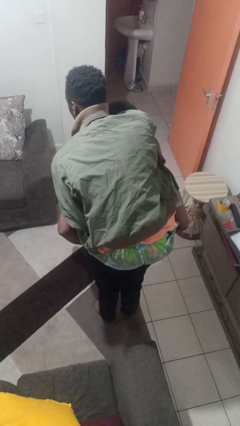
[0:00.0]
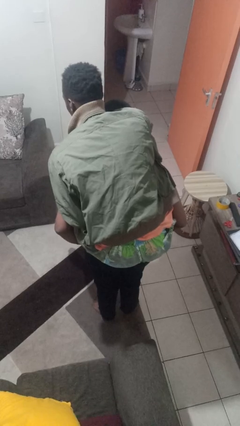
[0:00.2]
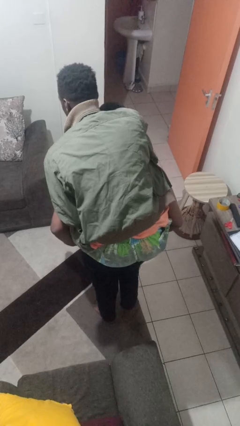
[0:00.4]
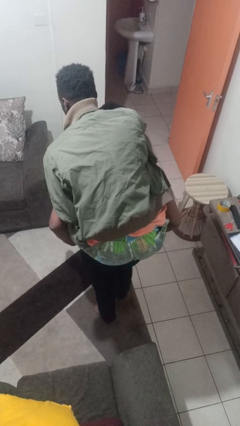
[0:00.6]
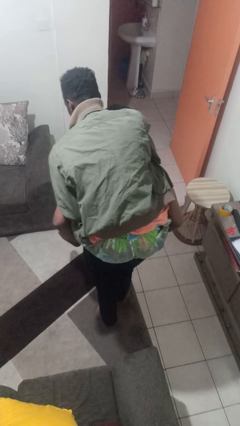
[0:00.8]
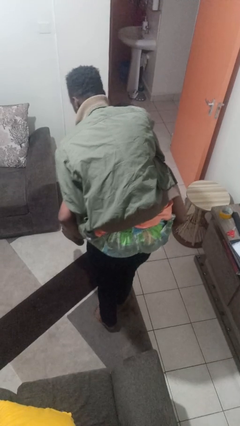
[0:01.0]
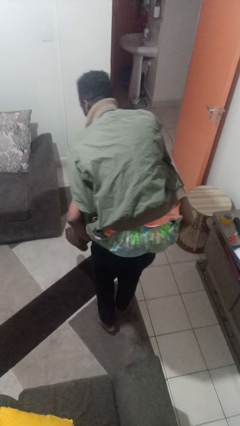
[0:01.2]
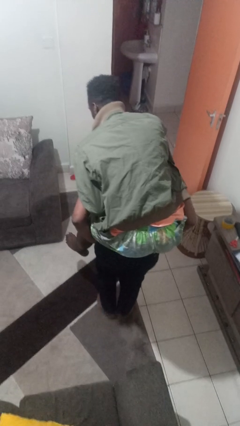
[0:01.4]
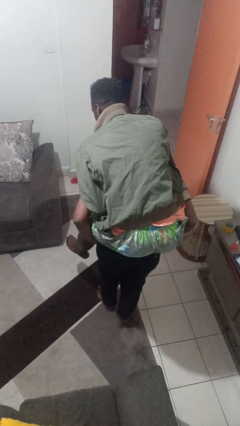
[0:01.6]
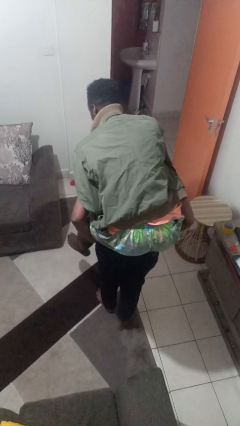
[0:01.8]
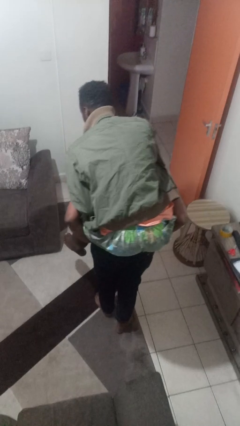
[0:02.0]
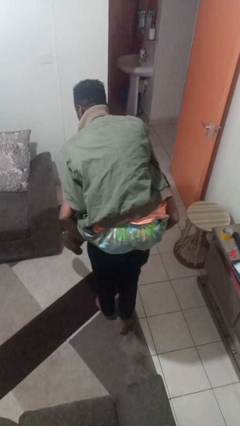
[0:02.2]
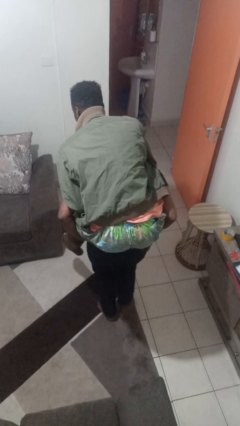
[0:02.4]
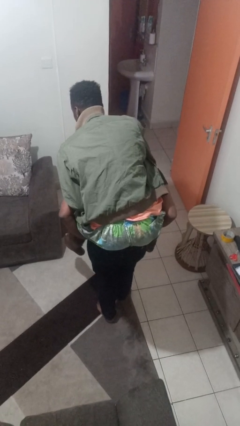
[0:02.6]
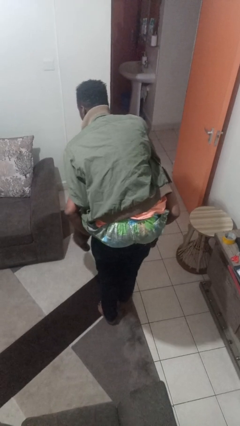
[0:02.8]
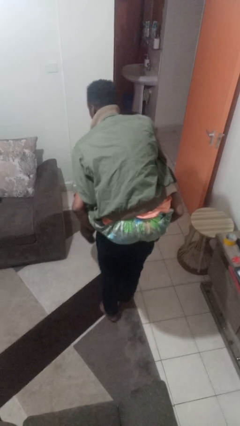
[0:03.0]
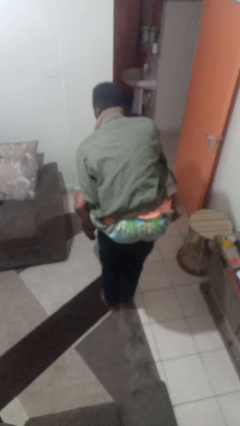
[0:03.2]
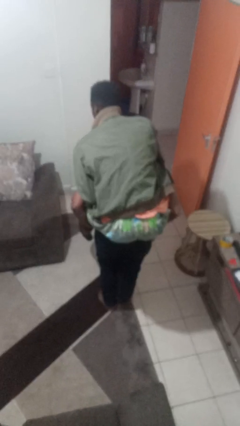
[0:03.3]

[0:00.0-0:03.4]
person carries person on back

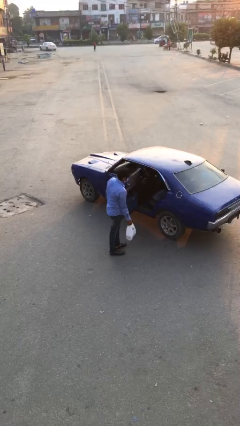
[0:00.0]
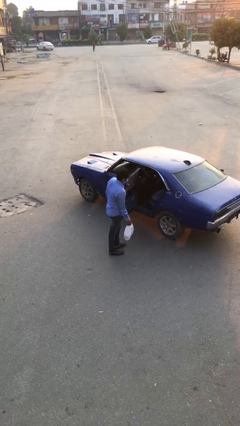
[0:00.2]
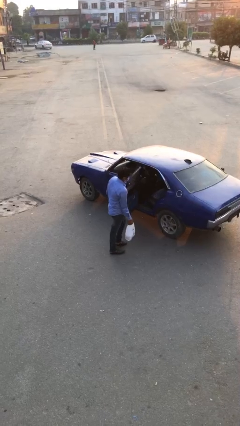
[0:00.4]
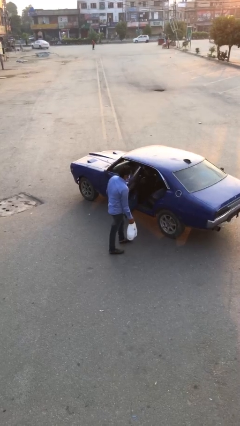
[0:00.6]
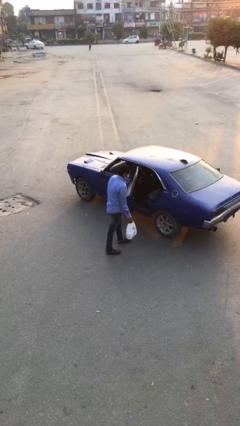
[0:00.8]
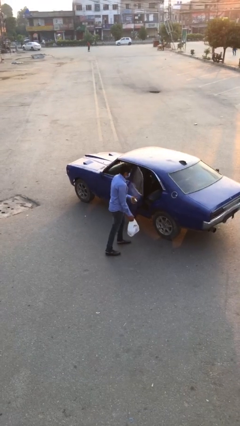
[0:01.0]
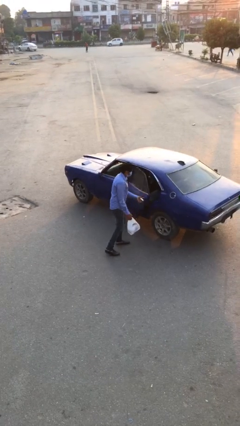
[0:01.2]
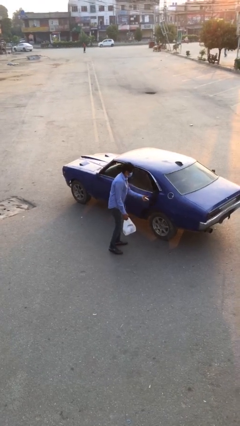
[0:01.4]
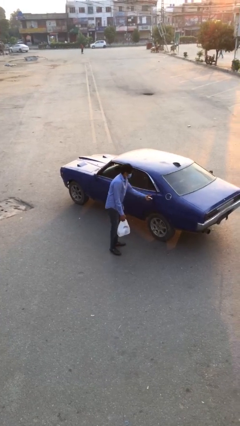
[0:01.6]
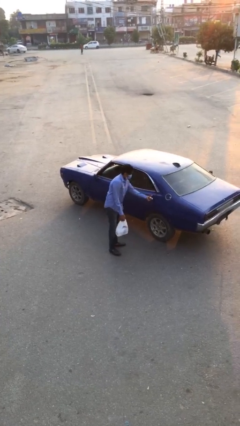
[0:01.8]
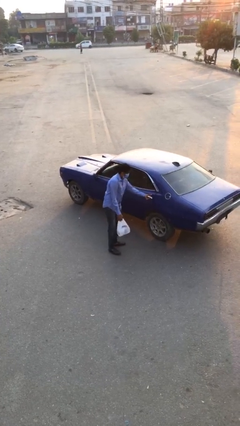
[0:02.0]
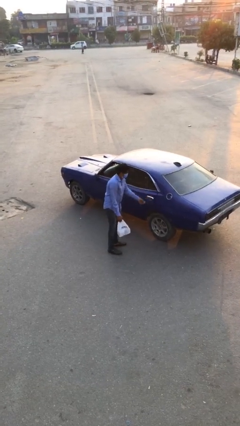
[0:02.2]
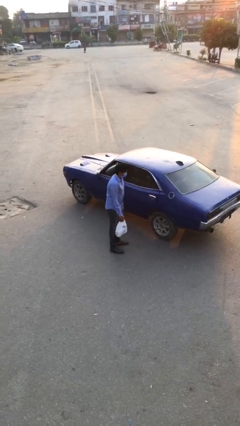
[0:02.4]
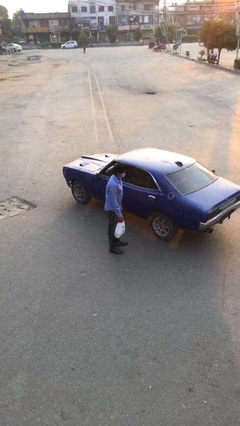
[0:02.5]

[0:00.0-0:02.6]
person closes car door

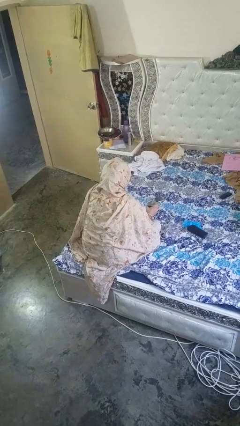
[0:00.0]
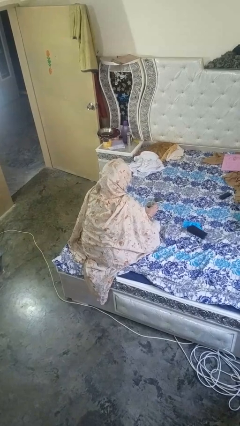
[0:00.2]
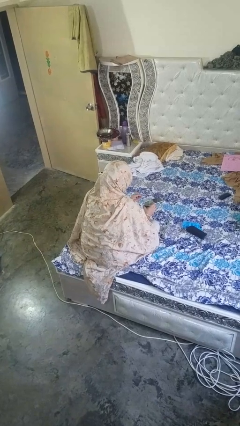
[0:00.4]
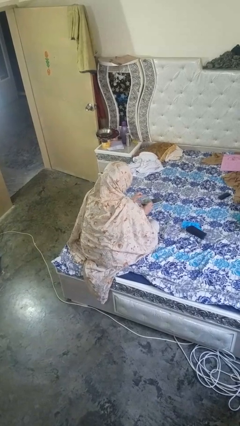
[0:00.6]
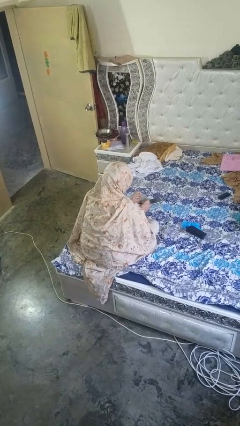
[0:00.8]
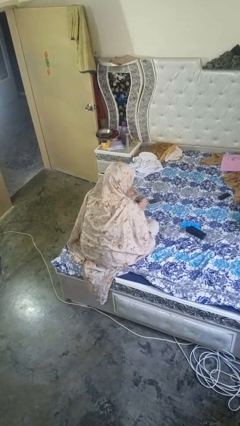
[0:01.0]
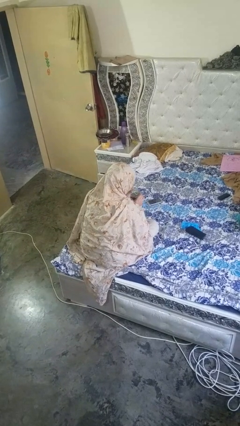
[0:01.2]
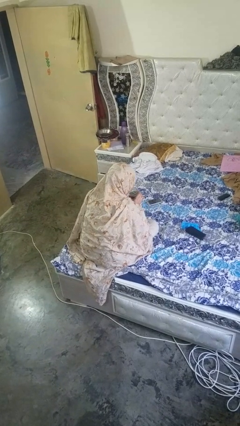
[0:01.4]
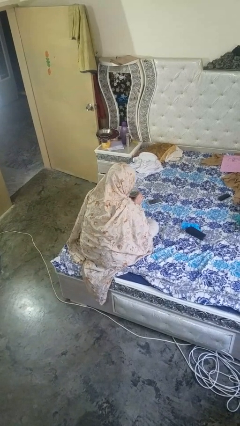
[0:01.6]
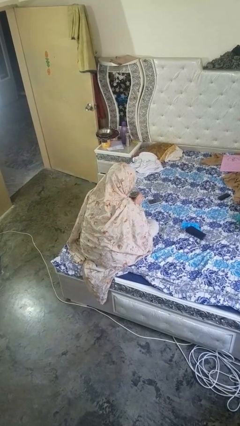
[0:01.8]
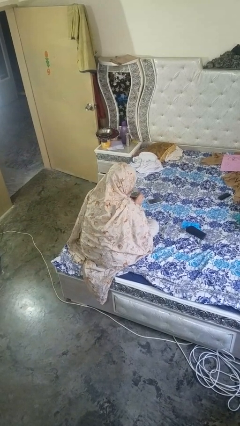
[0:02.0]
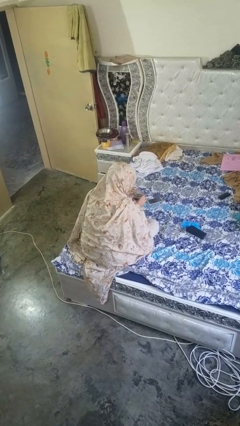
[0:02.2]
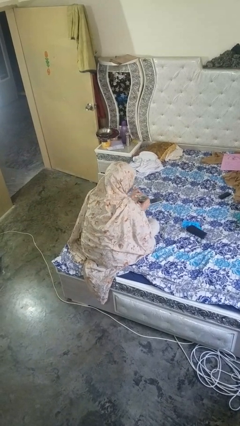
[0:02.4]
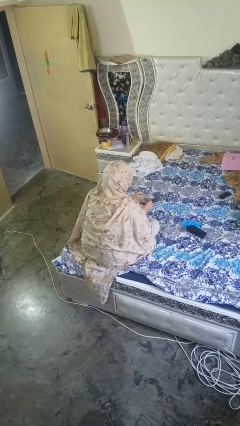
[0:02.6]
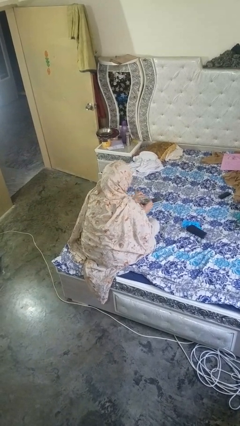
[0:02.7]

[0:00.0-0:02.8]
person drinks from straw

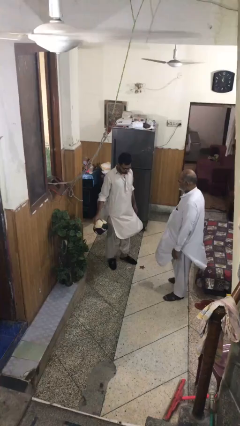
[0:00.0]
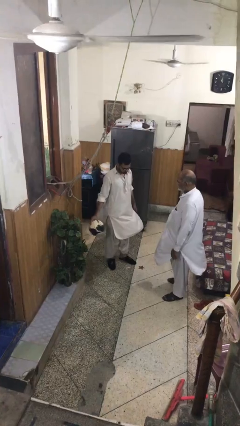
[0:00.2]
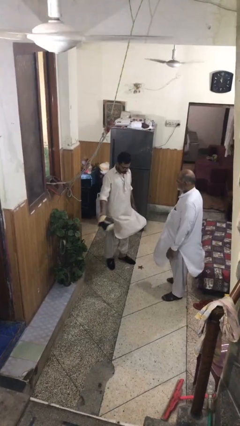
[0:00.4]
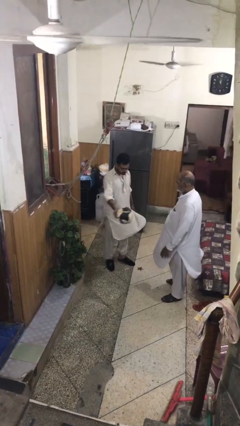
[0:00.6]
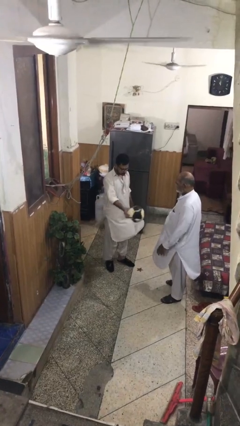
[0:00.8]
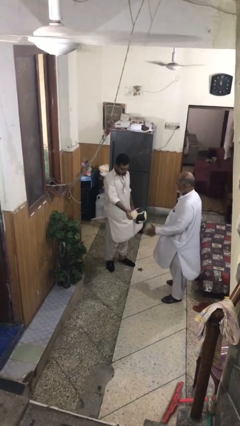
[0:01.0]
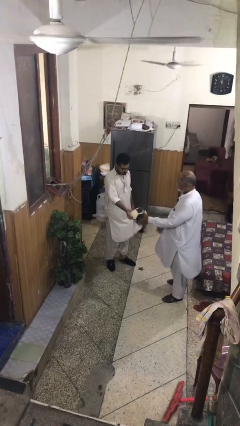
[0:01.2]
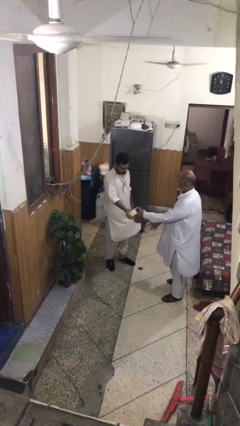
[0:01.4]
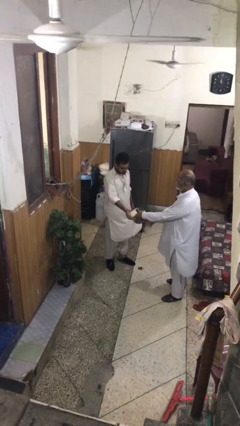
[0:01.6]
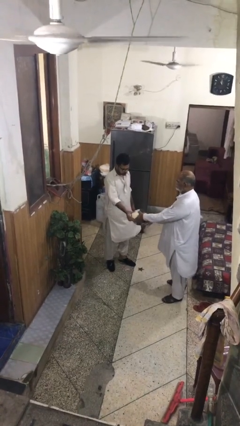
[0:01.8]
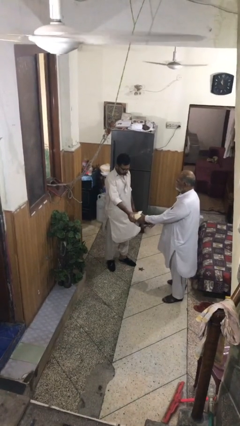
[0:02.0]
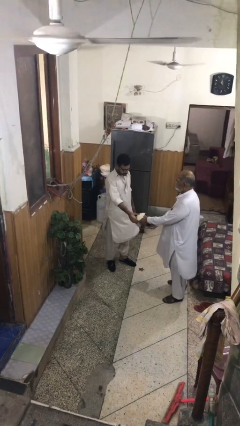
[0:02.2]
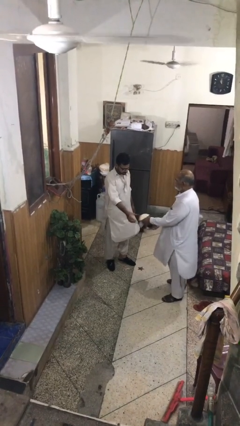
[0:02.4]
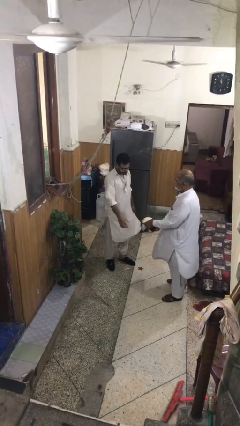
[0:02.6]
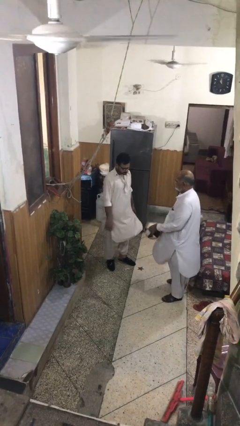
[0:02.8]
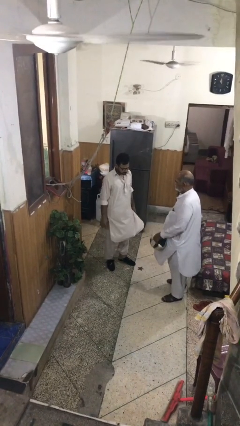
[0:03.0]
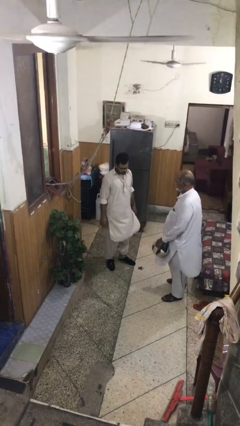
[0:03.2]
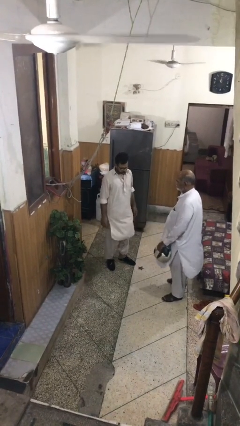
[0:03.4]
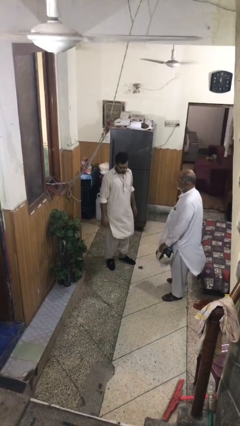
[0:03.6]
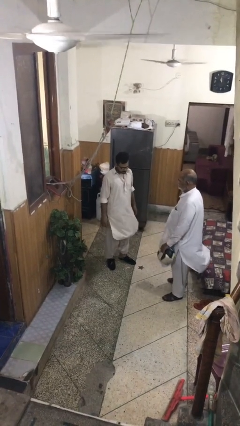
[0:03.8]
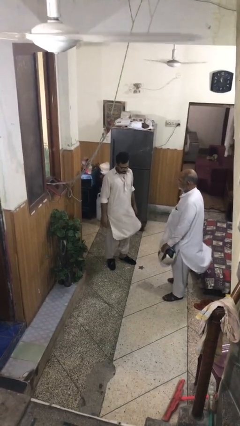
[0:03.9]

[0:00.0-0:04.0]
person transfers object to person

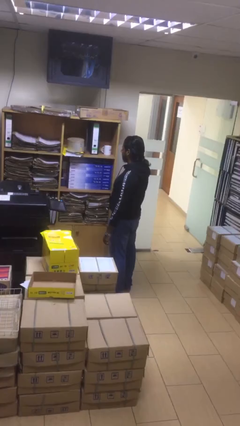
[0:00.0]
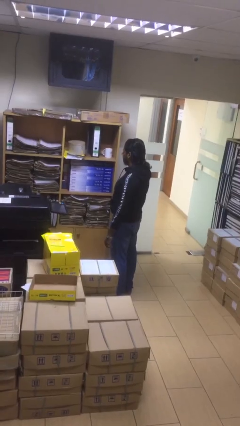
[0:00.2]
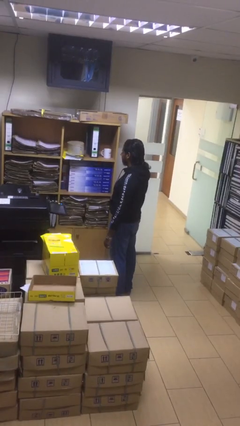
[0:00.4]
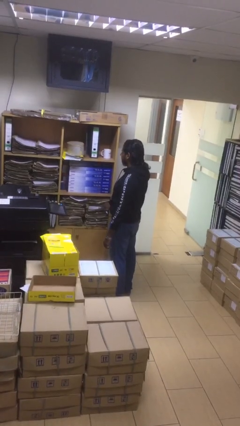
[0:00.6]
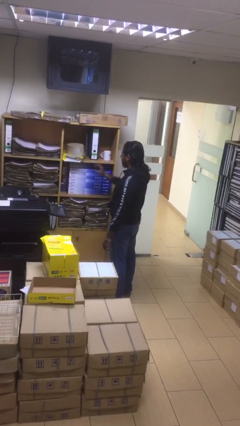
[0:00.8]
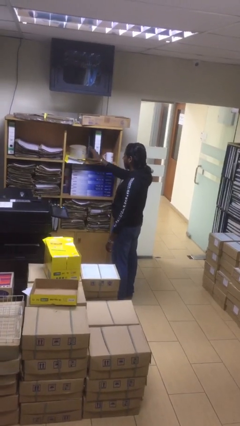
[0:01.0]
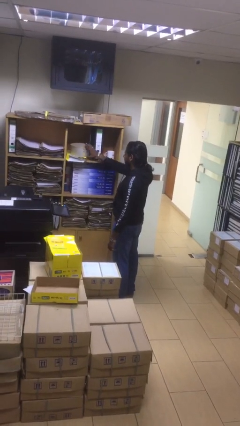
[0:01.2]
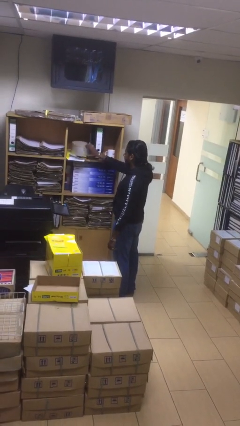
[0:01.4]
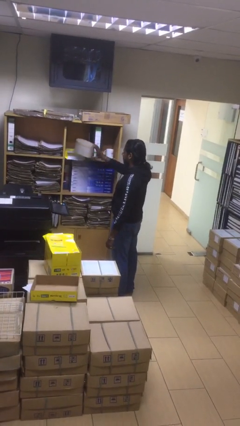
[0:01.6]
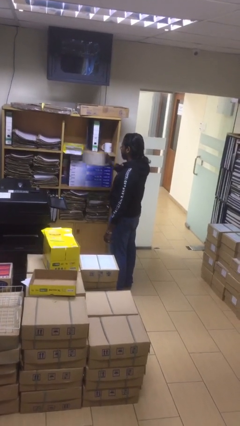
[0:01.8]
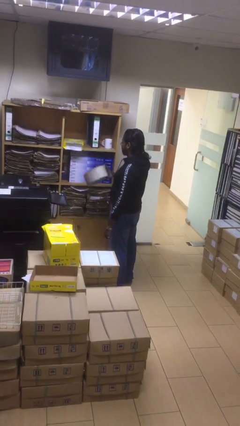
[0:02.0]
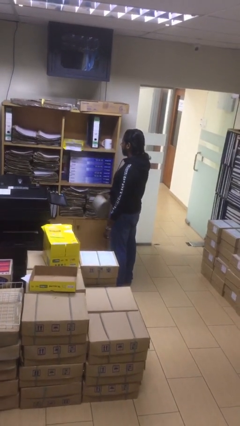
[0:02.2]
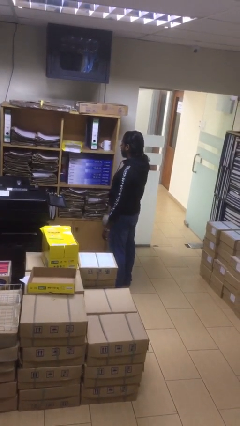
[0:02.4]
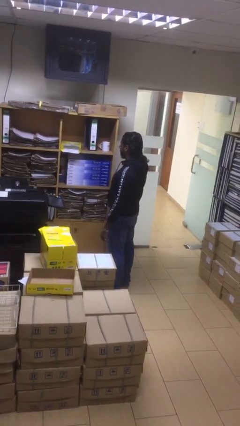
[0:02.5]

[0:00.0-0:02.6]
person picks up object from cabinet

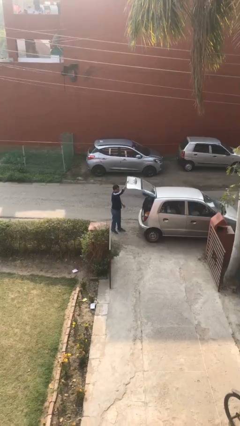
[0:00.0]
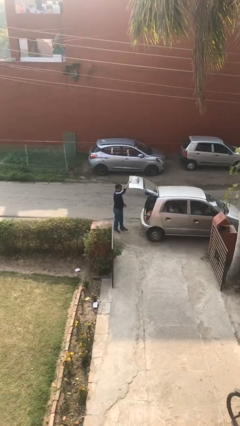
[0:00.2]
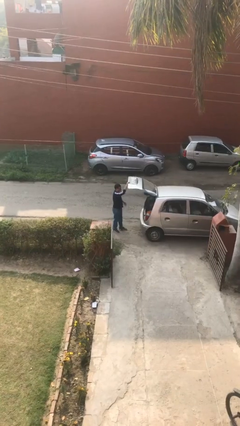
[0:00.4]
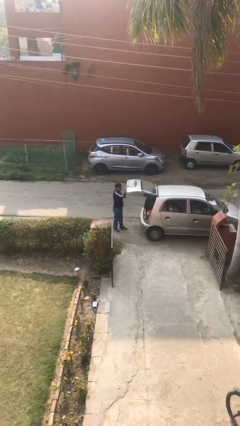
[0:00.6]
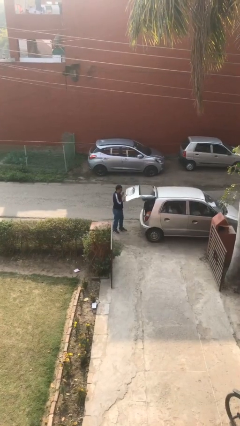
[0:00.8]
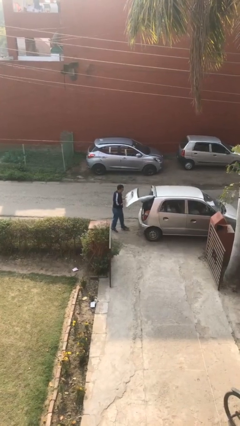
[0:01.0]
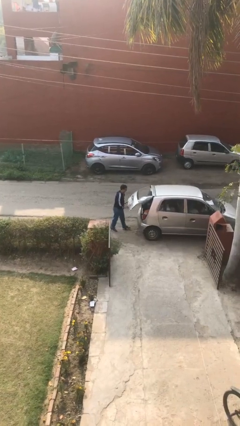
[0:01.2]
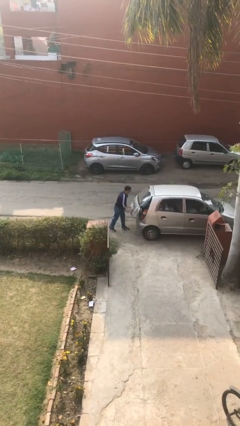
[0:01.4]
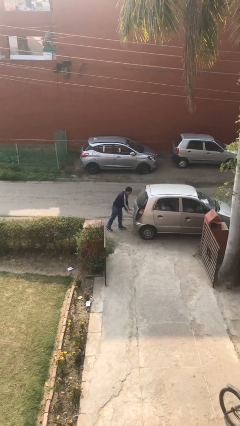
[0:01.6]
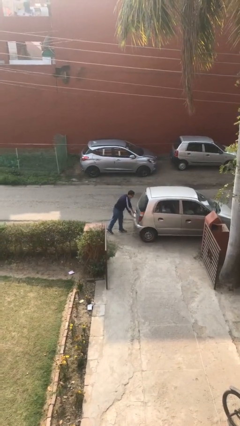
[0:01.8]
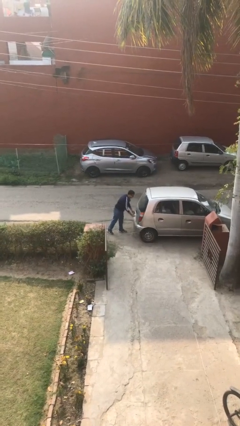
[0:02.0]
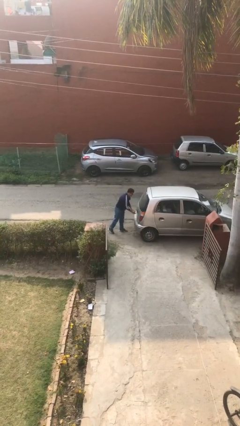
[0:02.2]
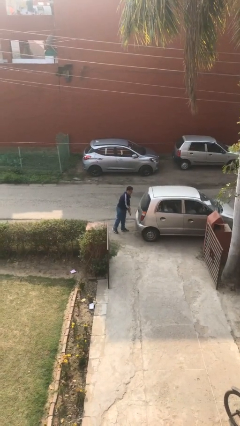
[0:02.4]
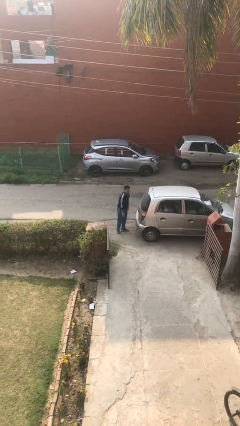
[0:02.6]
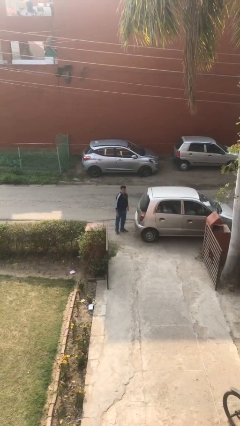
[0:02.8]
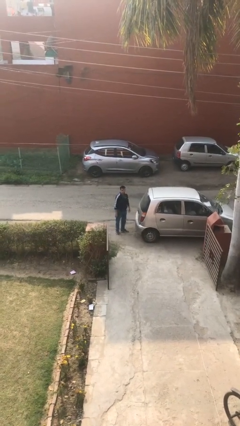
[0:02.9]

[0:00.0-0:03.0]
person closes car trunk
